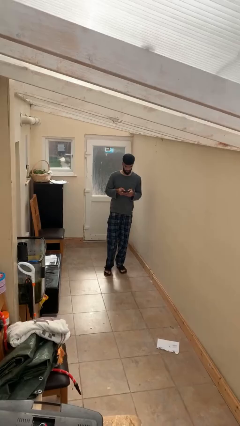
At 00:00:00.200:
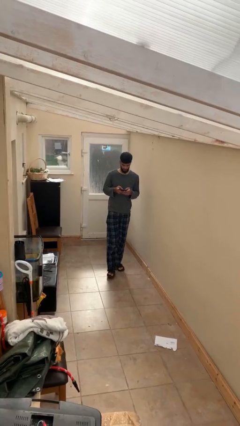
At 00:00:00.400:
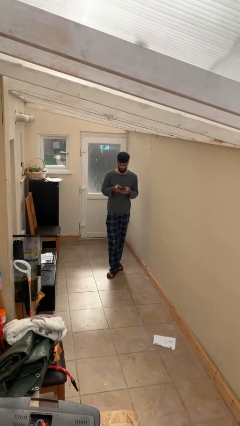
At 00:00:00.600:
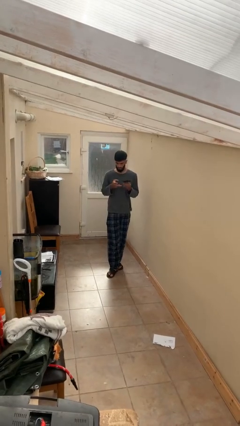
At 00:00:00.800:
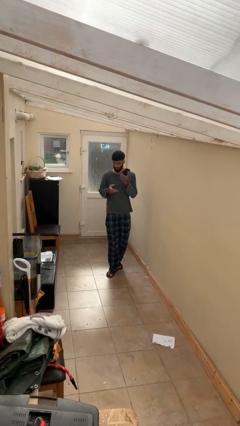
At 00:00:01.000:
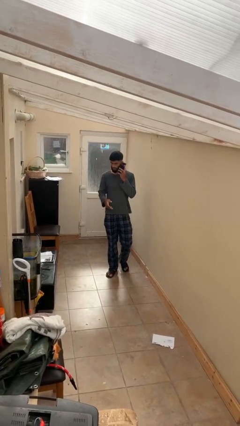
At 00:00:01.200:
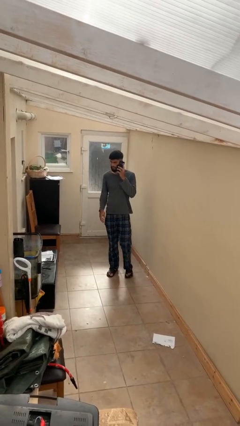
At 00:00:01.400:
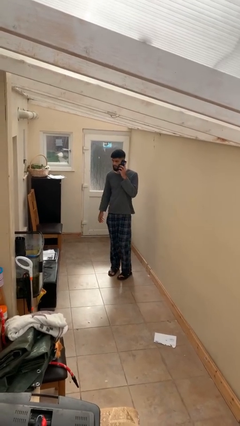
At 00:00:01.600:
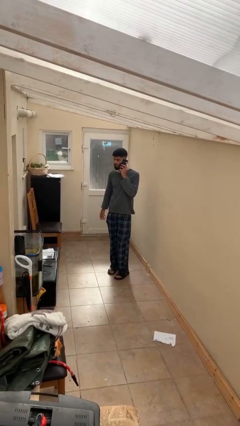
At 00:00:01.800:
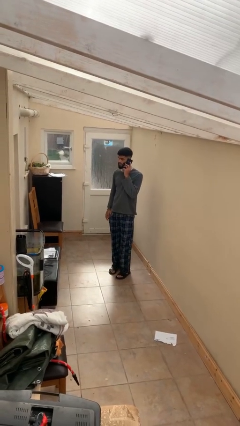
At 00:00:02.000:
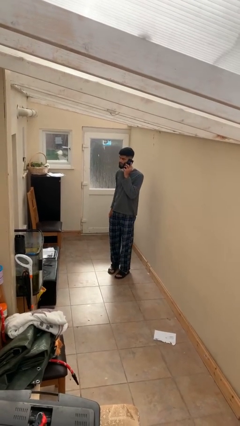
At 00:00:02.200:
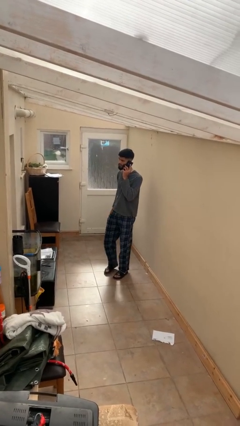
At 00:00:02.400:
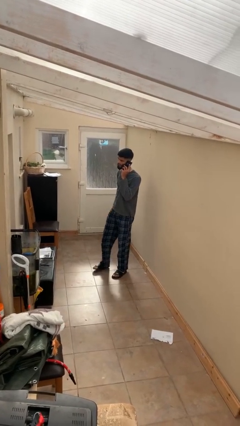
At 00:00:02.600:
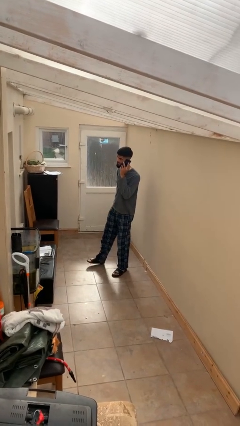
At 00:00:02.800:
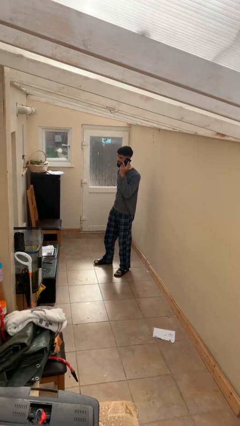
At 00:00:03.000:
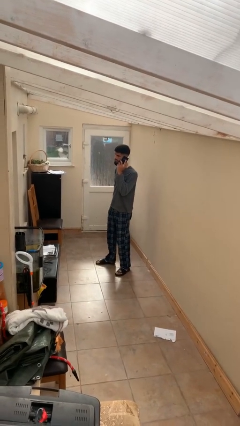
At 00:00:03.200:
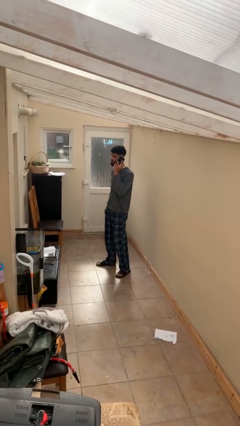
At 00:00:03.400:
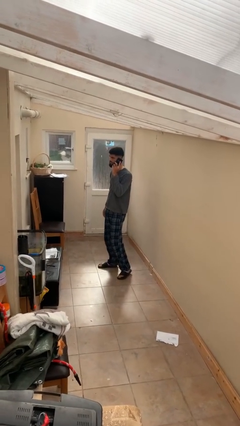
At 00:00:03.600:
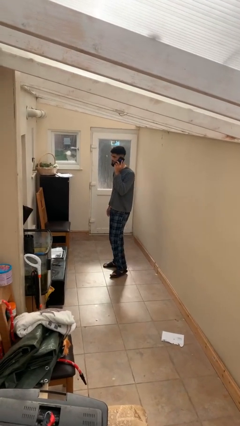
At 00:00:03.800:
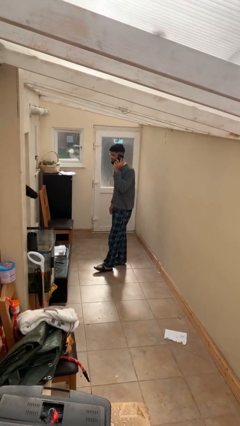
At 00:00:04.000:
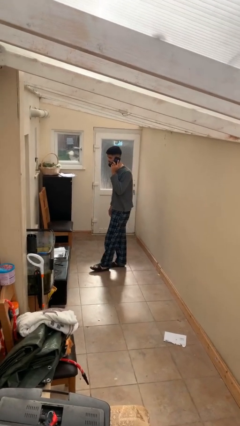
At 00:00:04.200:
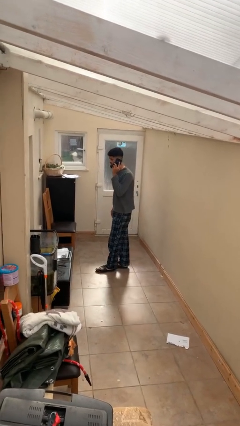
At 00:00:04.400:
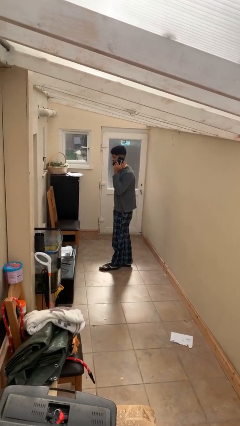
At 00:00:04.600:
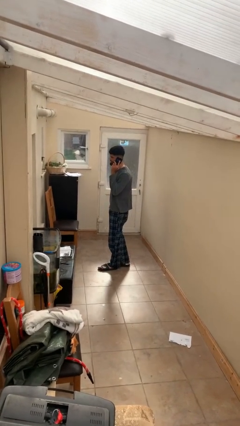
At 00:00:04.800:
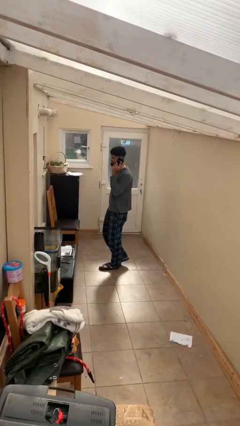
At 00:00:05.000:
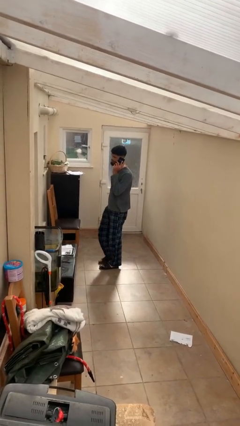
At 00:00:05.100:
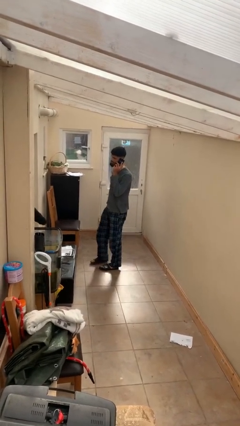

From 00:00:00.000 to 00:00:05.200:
person talks on phone

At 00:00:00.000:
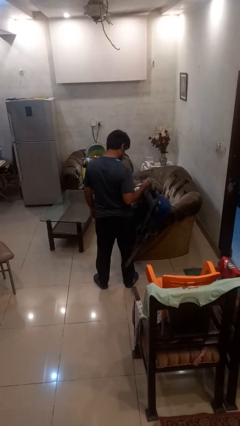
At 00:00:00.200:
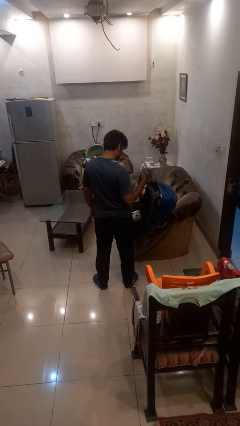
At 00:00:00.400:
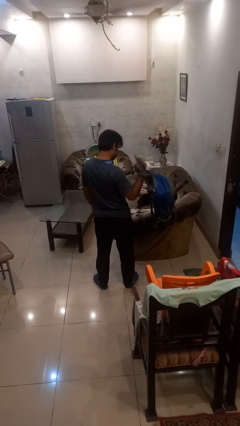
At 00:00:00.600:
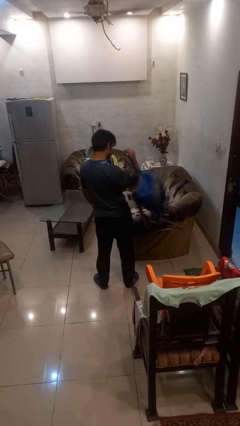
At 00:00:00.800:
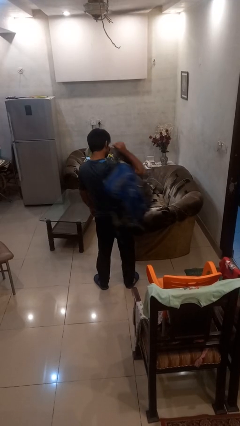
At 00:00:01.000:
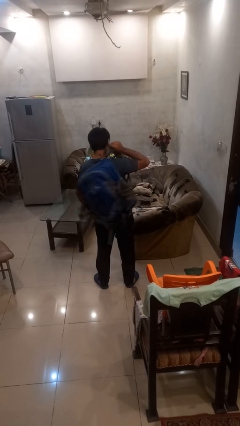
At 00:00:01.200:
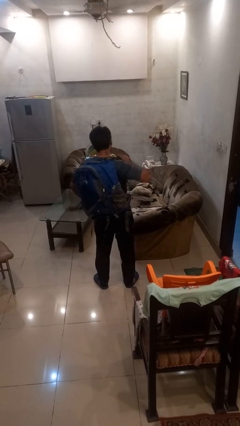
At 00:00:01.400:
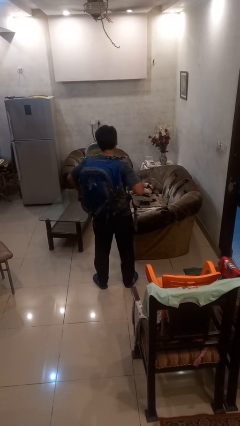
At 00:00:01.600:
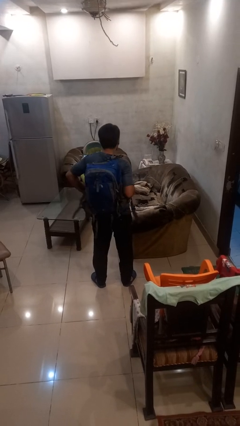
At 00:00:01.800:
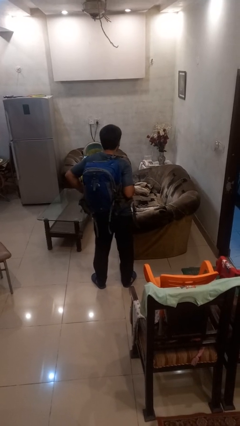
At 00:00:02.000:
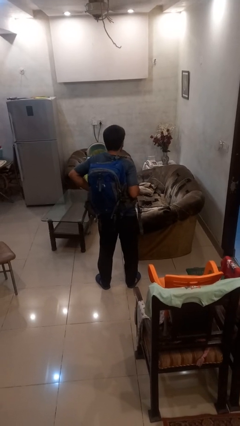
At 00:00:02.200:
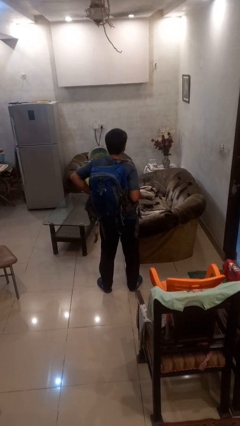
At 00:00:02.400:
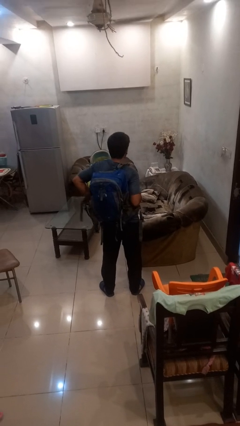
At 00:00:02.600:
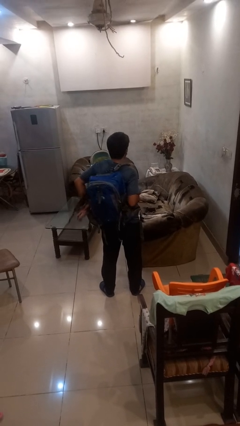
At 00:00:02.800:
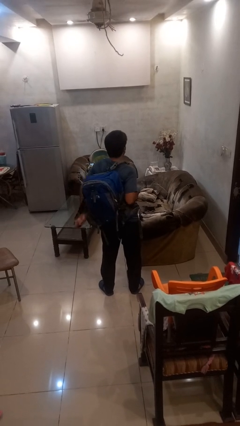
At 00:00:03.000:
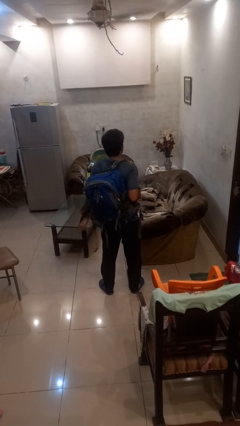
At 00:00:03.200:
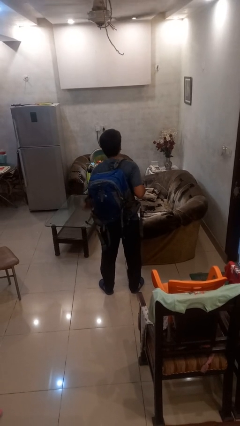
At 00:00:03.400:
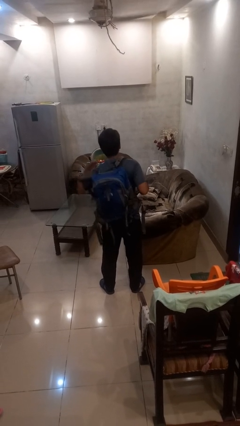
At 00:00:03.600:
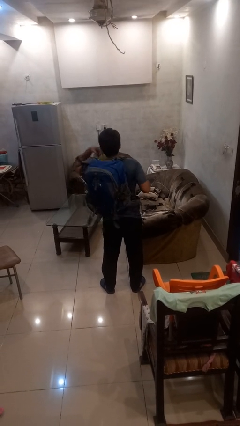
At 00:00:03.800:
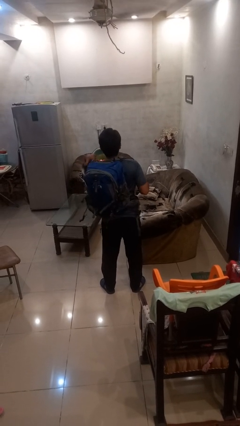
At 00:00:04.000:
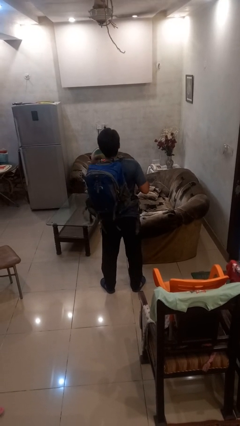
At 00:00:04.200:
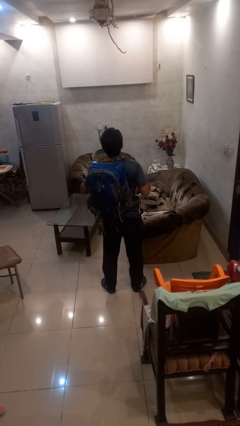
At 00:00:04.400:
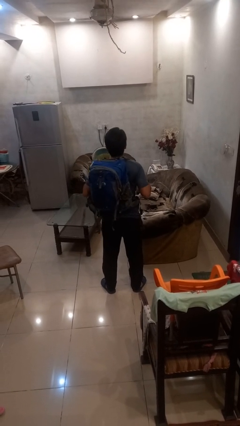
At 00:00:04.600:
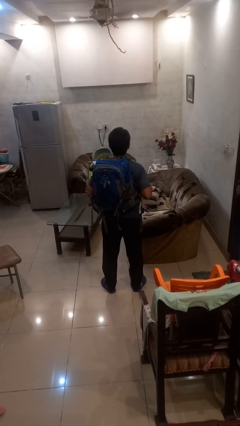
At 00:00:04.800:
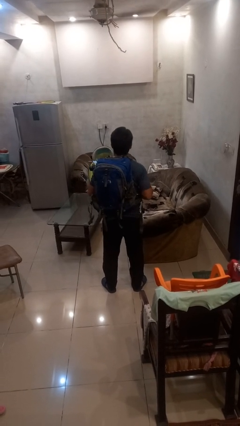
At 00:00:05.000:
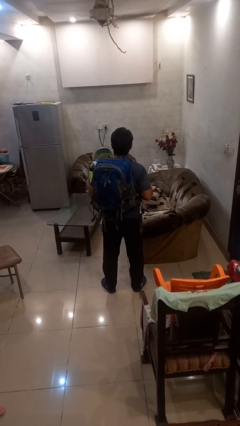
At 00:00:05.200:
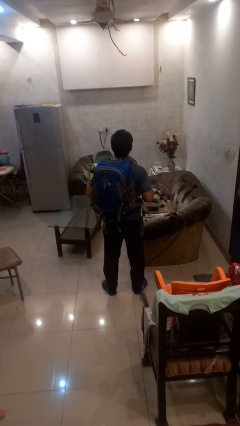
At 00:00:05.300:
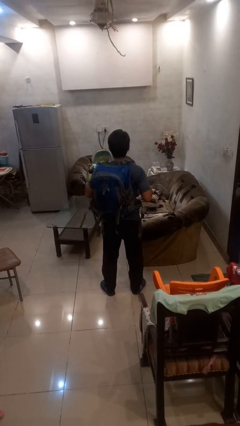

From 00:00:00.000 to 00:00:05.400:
person puts on backpack

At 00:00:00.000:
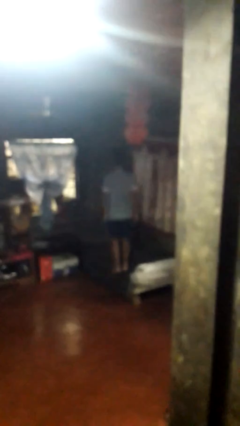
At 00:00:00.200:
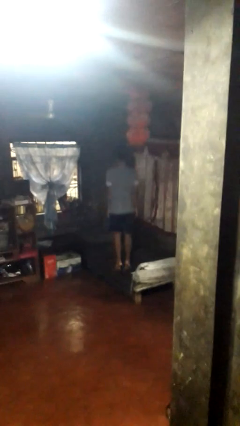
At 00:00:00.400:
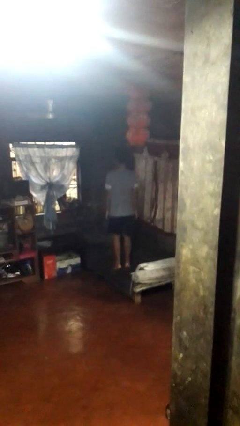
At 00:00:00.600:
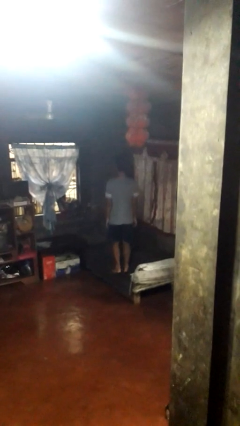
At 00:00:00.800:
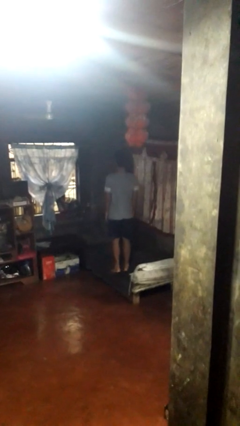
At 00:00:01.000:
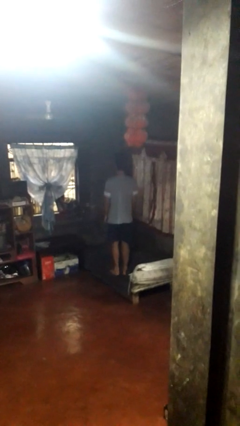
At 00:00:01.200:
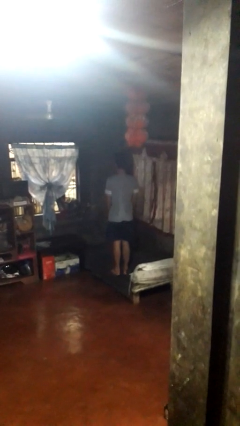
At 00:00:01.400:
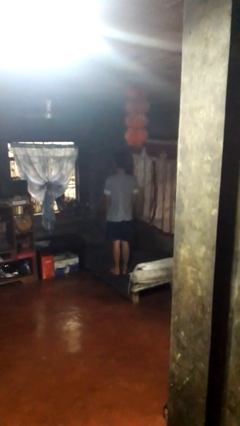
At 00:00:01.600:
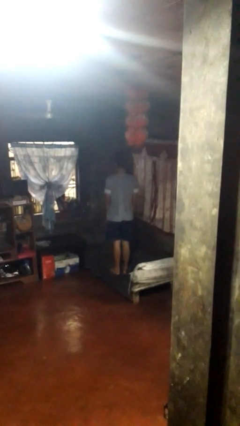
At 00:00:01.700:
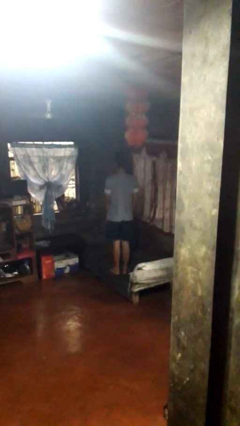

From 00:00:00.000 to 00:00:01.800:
person jumps on bed

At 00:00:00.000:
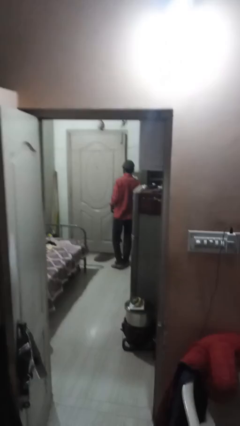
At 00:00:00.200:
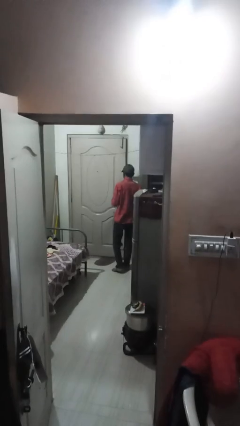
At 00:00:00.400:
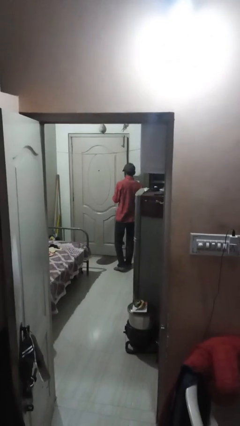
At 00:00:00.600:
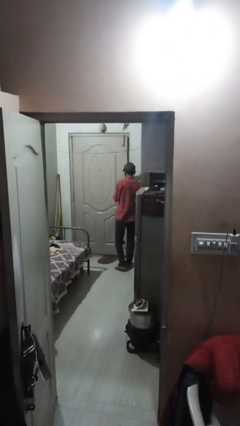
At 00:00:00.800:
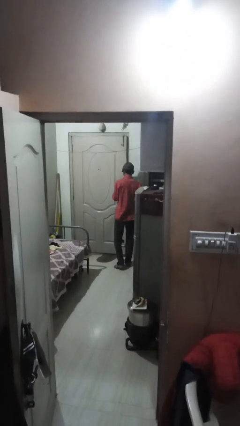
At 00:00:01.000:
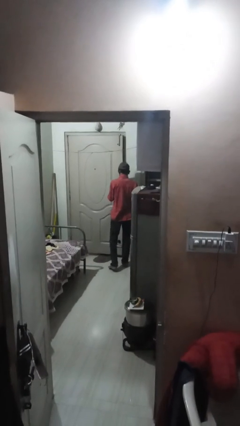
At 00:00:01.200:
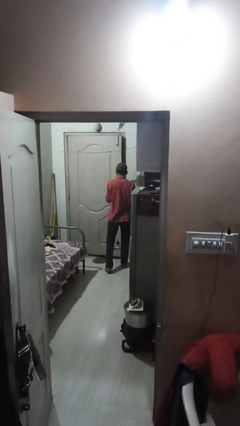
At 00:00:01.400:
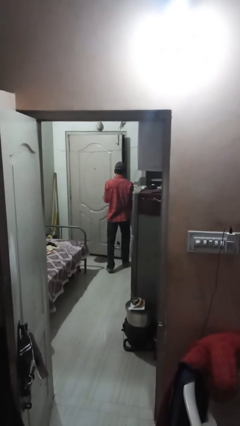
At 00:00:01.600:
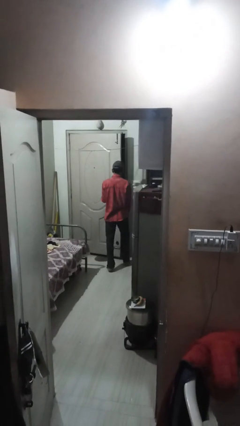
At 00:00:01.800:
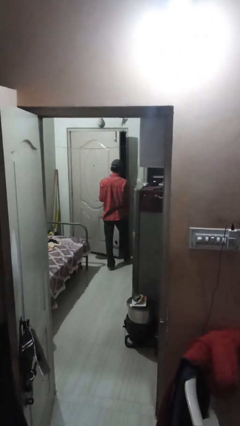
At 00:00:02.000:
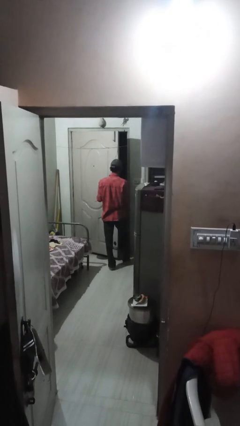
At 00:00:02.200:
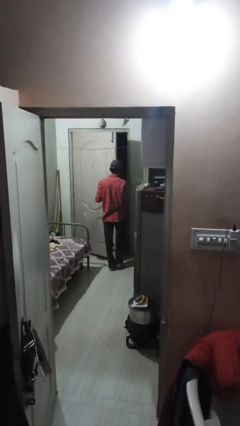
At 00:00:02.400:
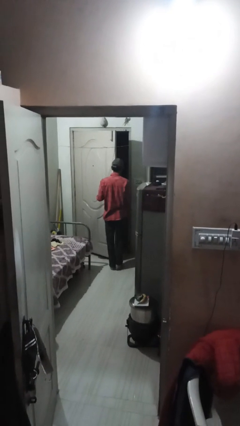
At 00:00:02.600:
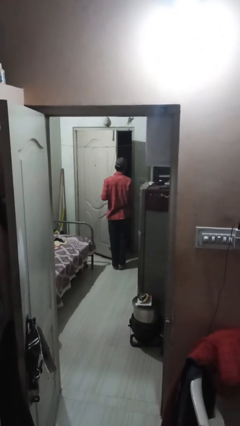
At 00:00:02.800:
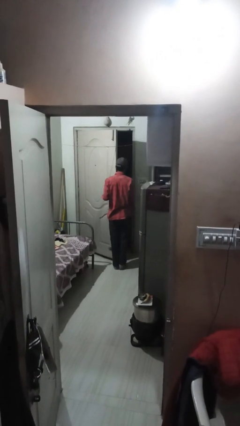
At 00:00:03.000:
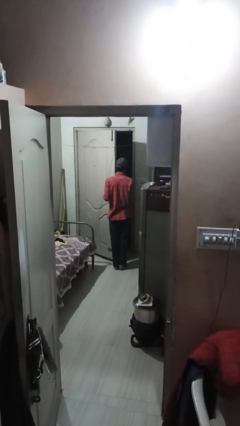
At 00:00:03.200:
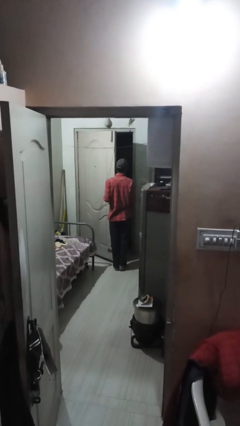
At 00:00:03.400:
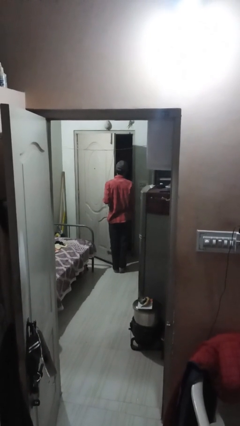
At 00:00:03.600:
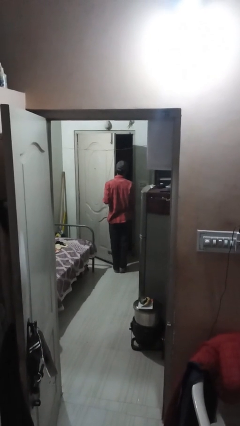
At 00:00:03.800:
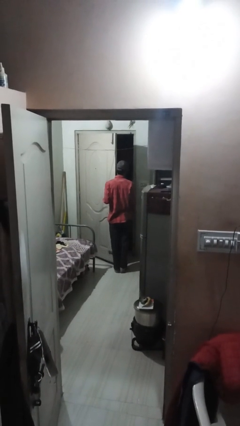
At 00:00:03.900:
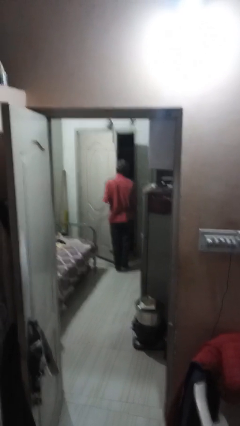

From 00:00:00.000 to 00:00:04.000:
person opens facility door

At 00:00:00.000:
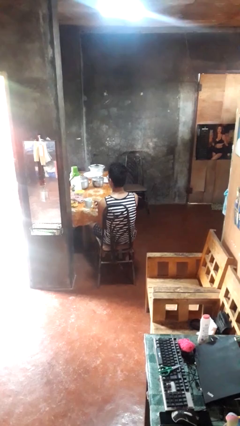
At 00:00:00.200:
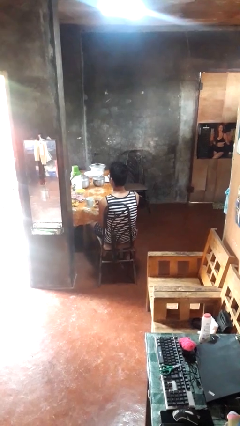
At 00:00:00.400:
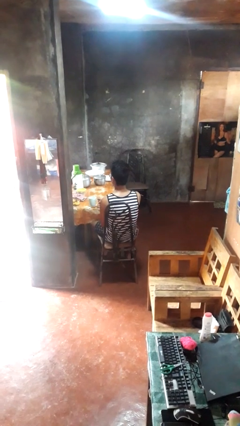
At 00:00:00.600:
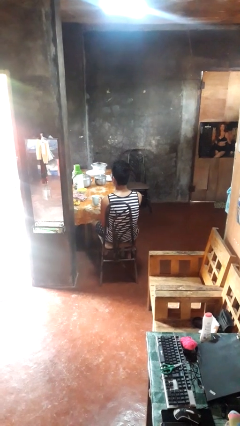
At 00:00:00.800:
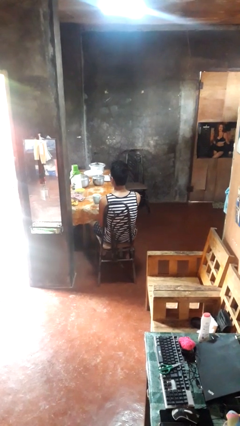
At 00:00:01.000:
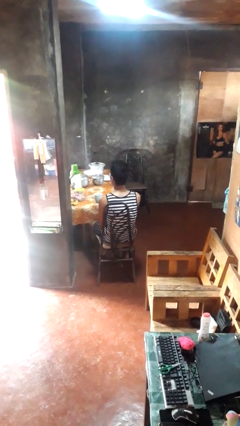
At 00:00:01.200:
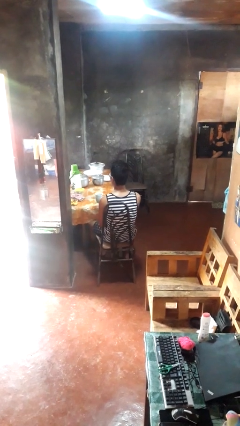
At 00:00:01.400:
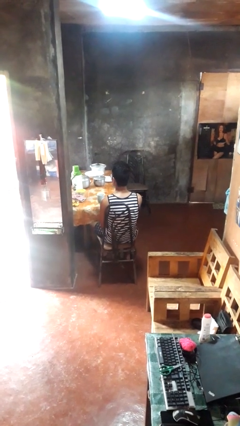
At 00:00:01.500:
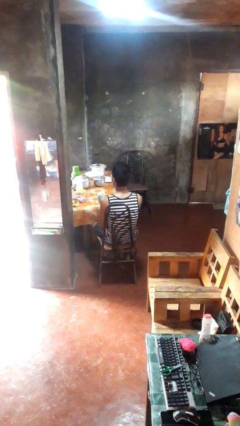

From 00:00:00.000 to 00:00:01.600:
person picks up object from table
